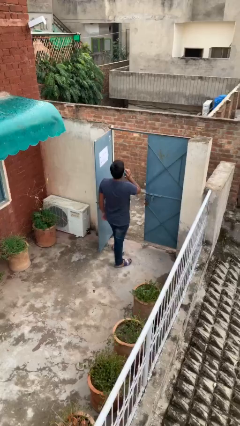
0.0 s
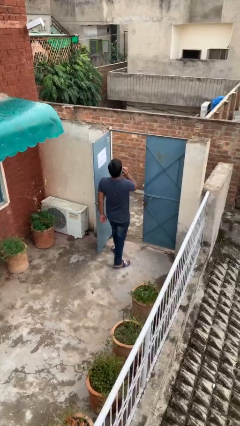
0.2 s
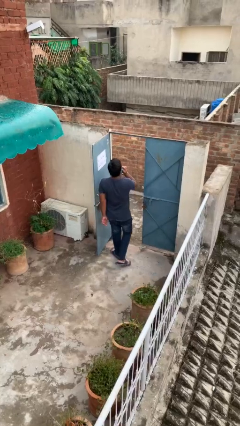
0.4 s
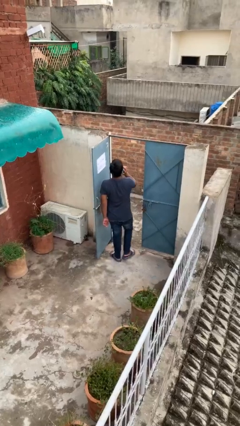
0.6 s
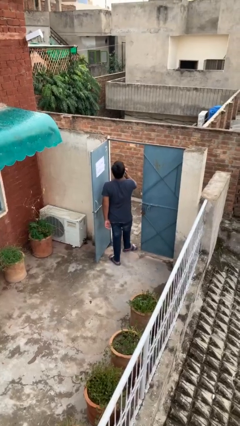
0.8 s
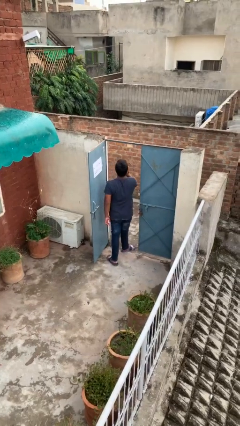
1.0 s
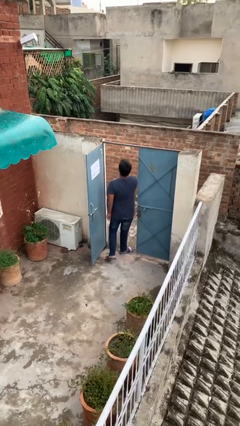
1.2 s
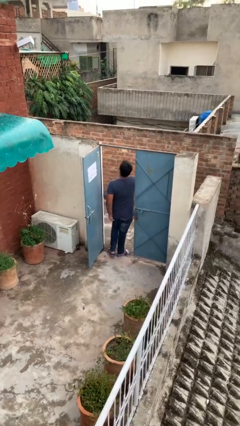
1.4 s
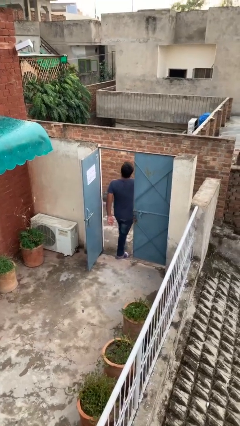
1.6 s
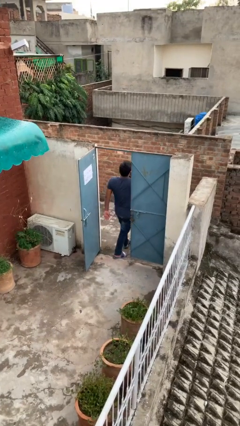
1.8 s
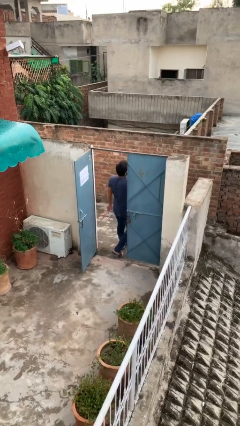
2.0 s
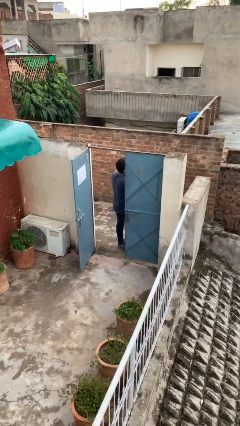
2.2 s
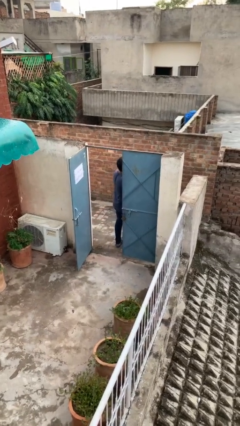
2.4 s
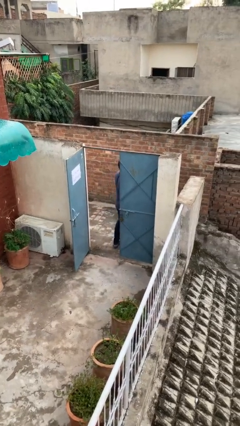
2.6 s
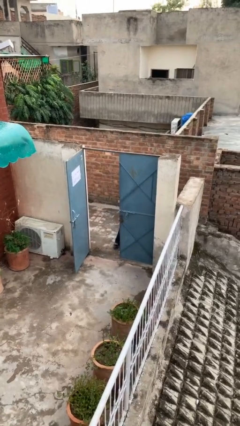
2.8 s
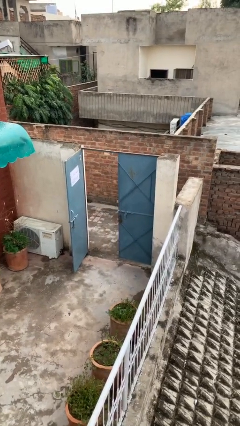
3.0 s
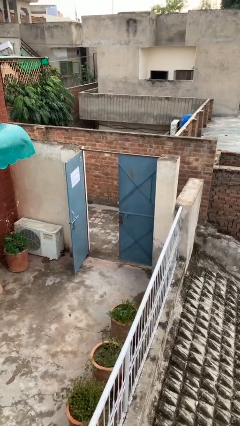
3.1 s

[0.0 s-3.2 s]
person exits scene through structure

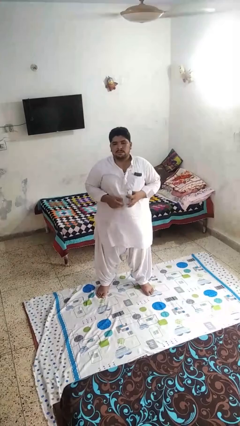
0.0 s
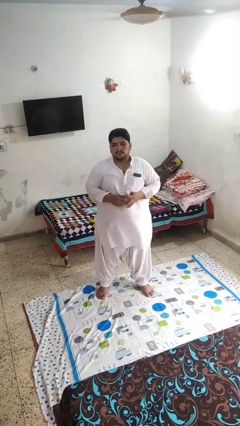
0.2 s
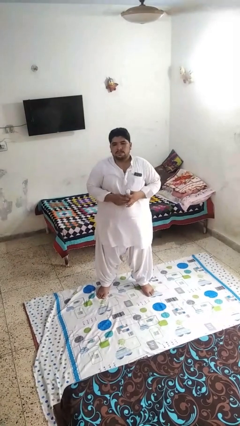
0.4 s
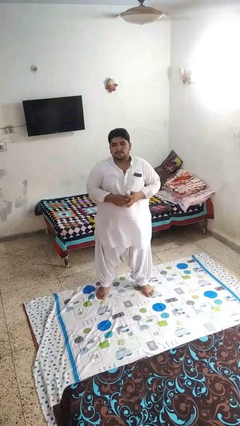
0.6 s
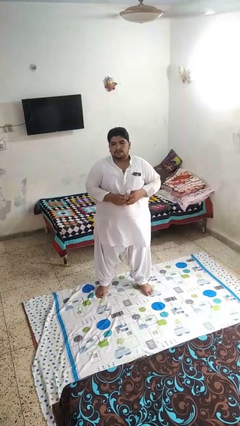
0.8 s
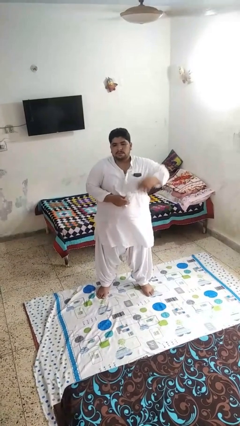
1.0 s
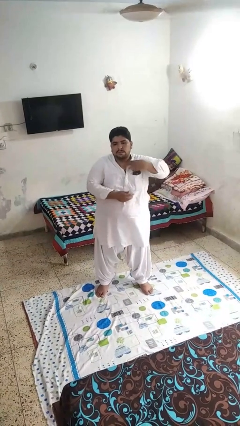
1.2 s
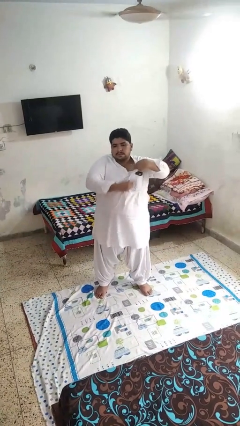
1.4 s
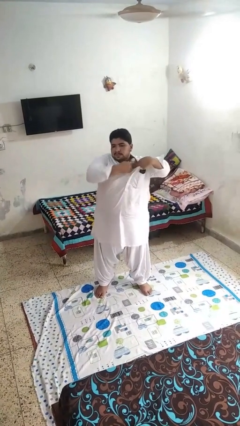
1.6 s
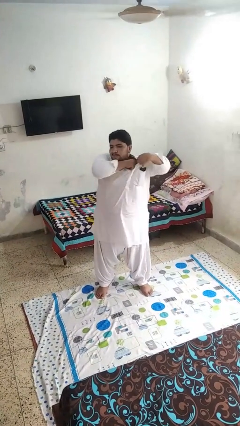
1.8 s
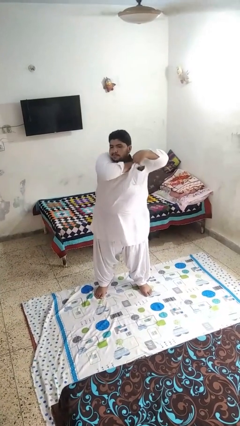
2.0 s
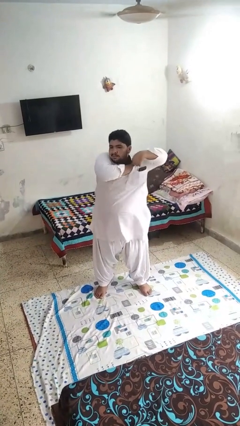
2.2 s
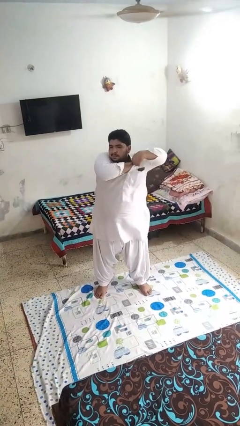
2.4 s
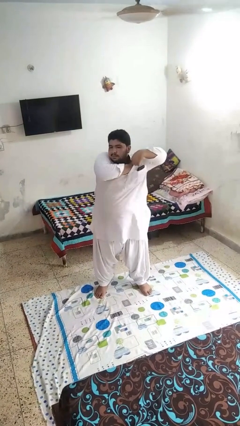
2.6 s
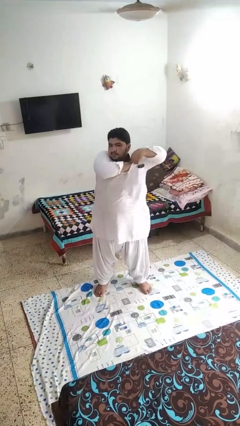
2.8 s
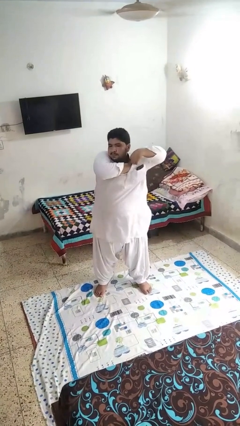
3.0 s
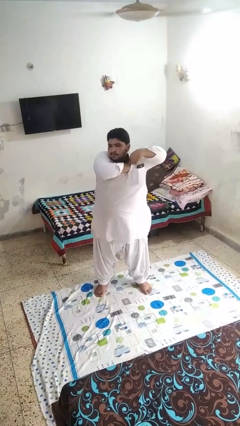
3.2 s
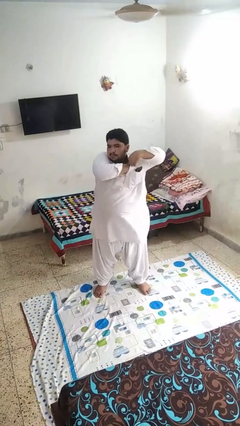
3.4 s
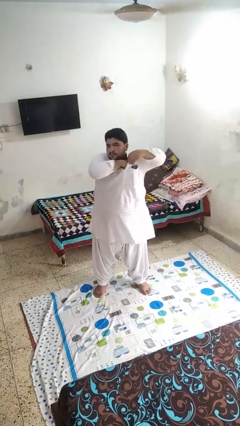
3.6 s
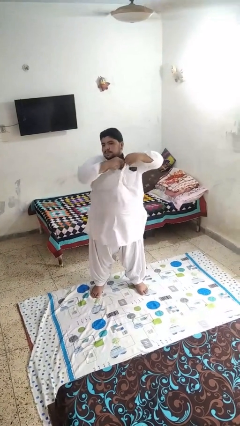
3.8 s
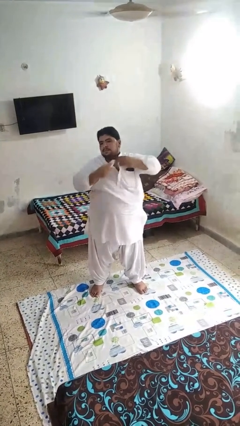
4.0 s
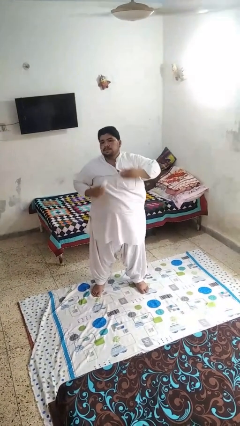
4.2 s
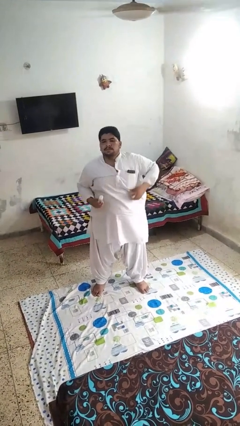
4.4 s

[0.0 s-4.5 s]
person applies deodorant

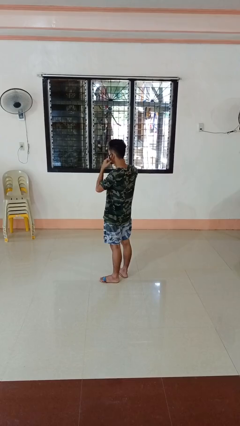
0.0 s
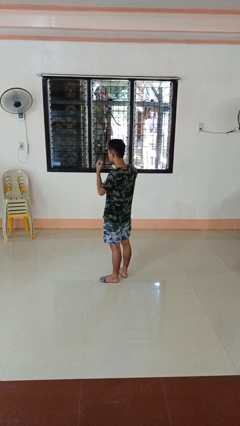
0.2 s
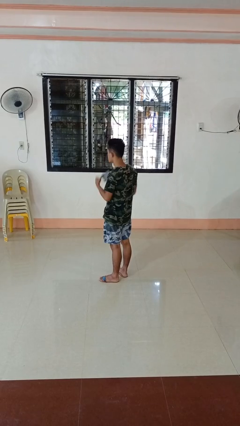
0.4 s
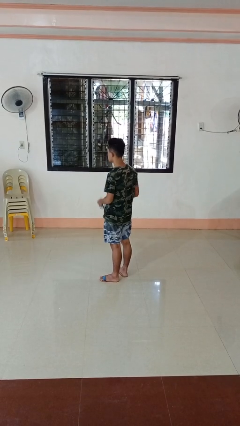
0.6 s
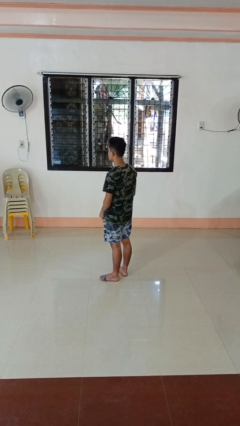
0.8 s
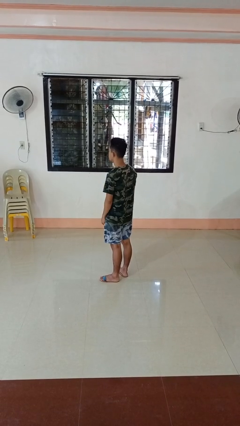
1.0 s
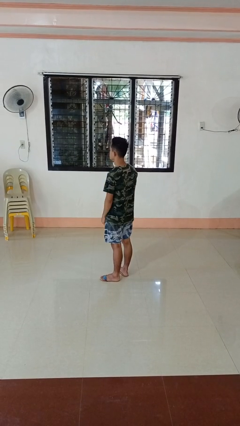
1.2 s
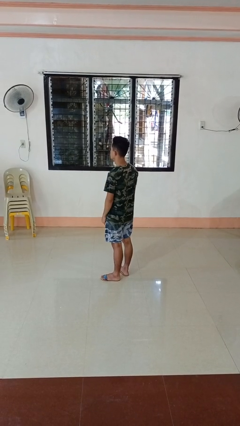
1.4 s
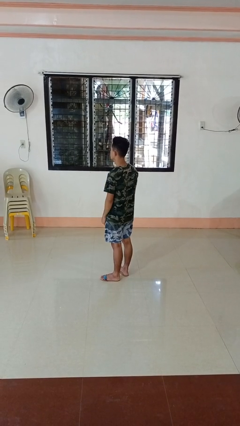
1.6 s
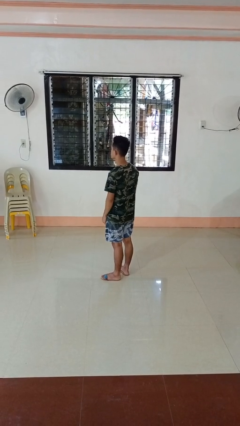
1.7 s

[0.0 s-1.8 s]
person takes off facemask

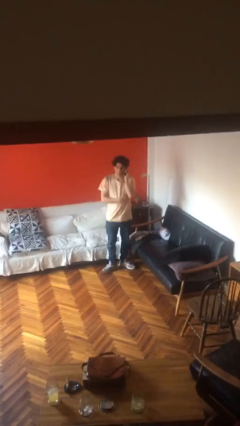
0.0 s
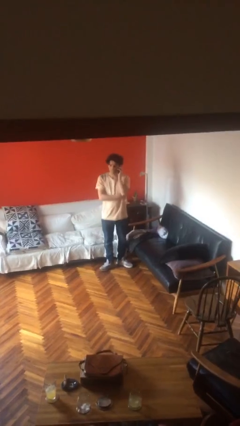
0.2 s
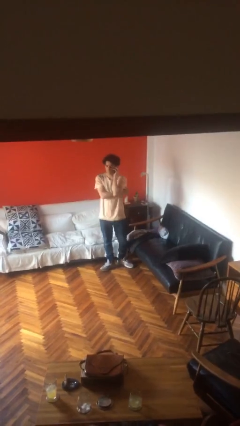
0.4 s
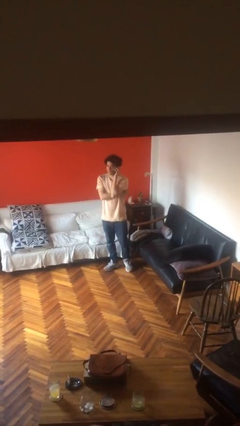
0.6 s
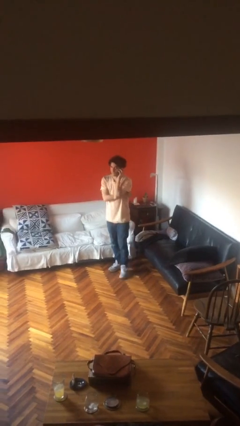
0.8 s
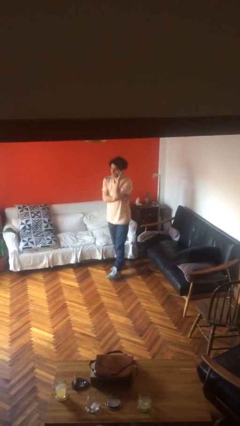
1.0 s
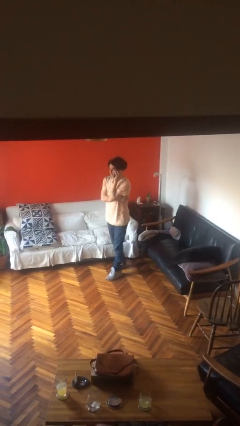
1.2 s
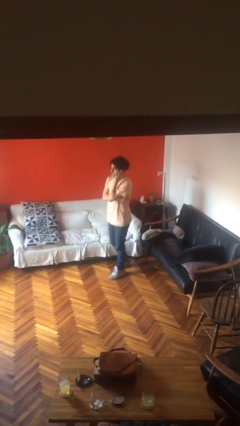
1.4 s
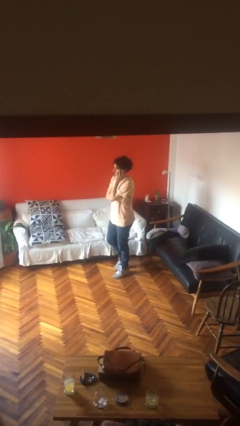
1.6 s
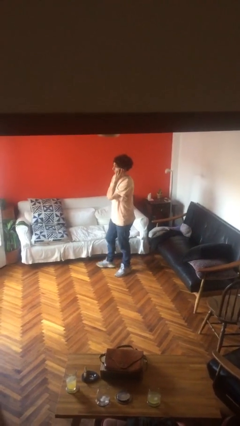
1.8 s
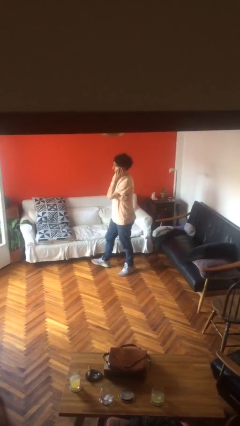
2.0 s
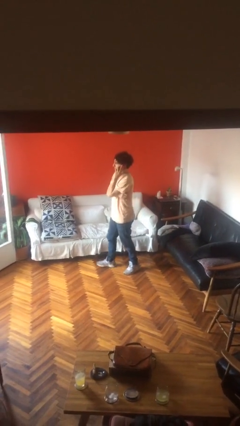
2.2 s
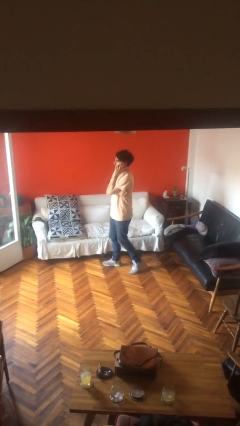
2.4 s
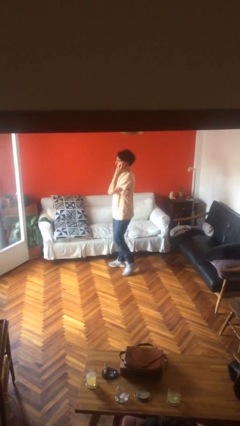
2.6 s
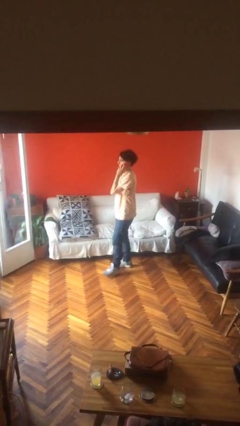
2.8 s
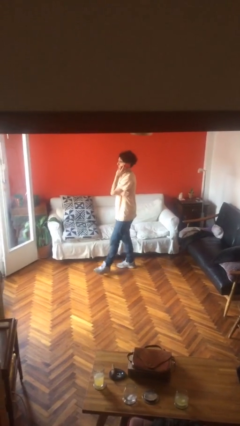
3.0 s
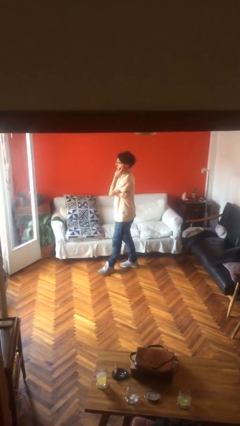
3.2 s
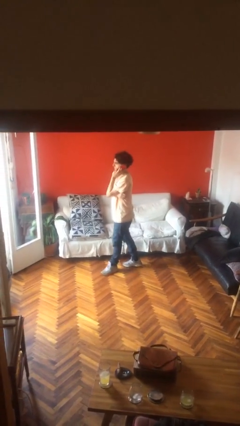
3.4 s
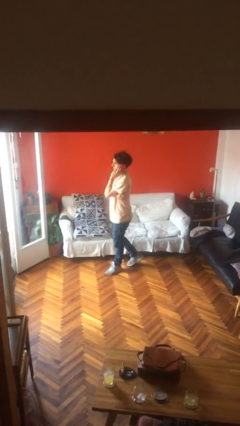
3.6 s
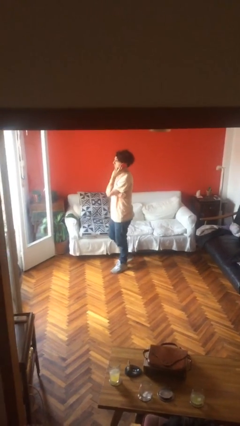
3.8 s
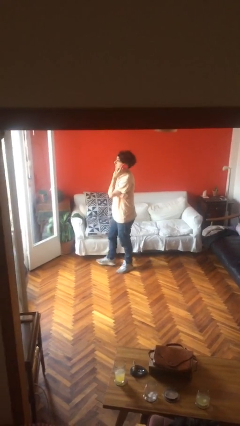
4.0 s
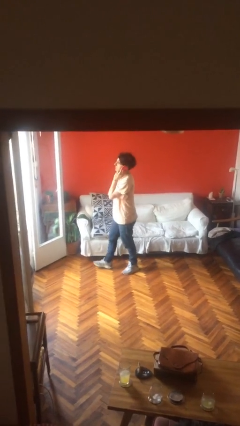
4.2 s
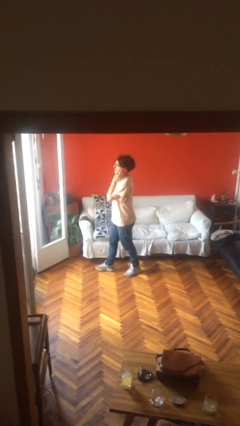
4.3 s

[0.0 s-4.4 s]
person talks on phone

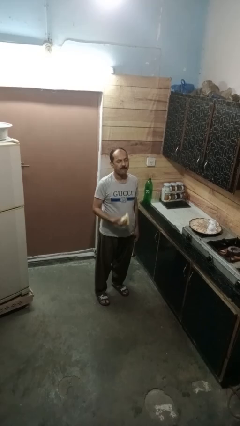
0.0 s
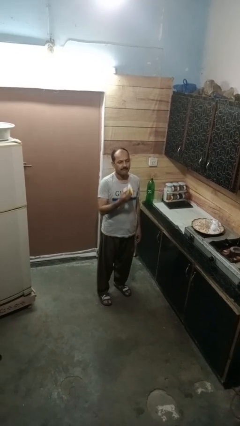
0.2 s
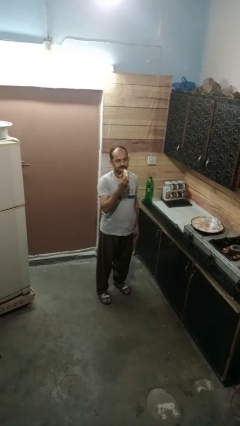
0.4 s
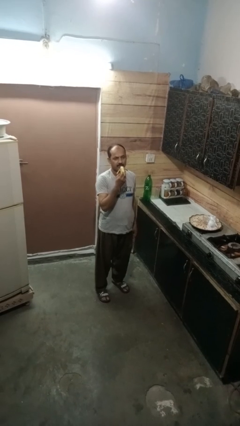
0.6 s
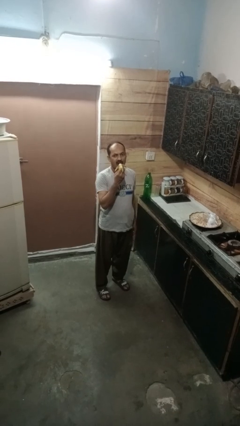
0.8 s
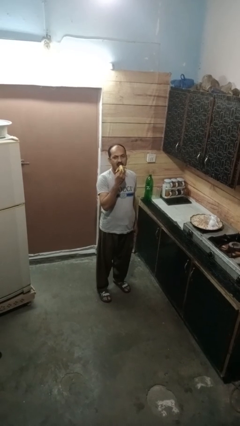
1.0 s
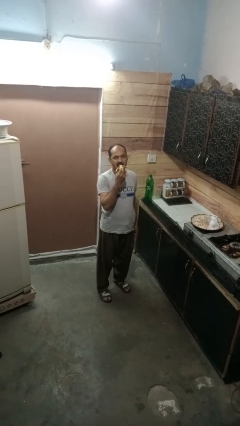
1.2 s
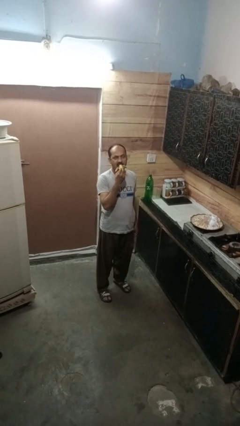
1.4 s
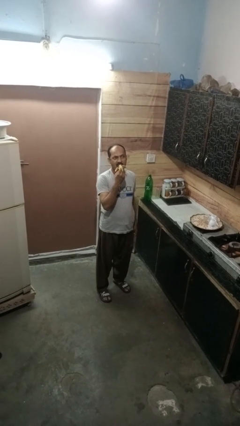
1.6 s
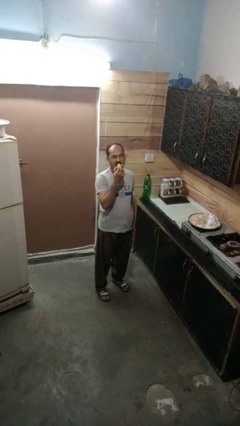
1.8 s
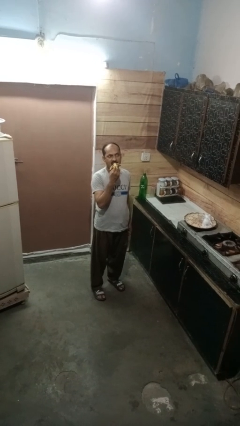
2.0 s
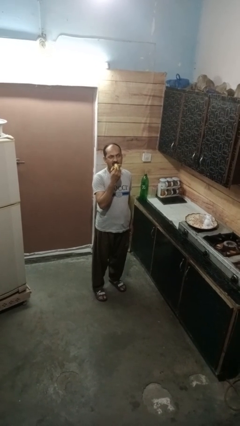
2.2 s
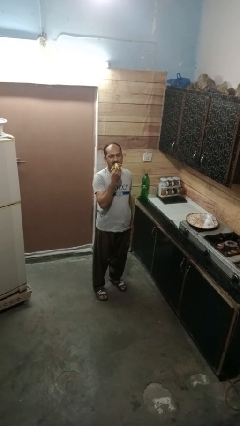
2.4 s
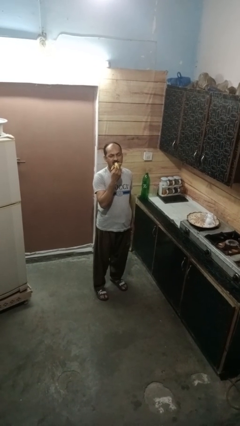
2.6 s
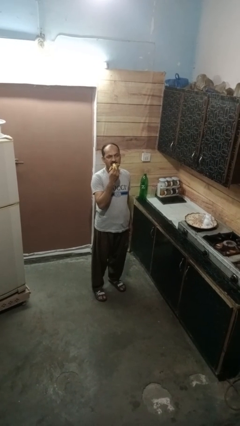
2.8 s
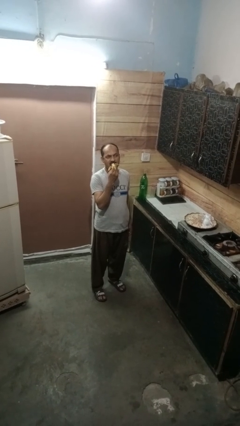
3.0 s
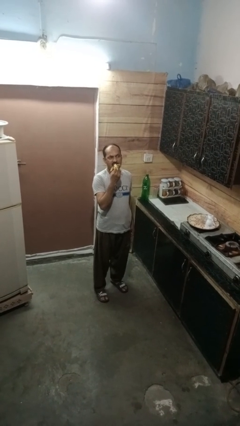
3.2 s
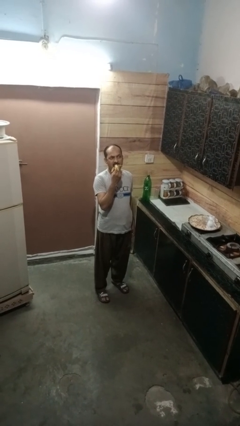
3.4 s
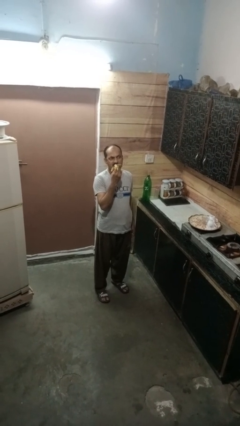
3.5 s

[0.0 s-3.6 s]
person eats banana

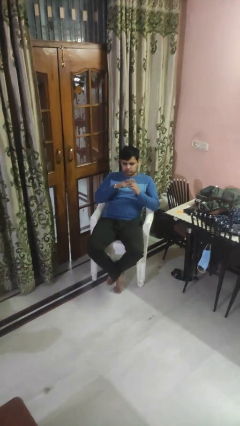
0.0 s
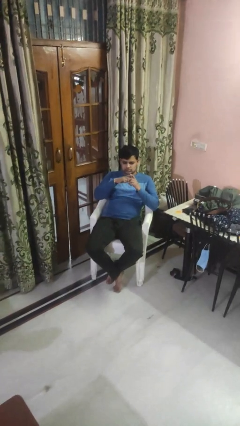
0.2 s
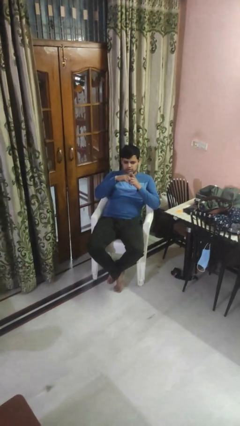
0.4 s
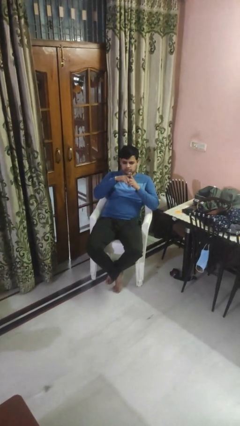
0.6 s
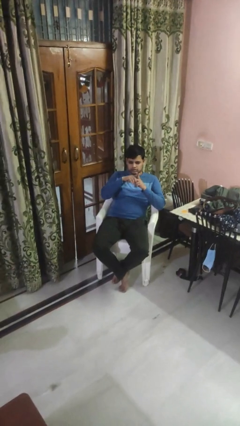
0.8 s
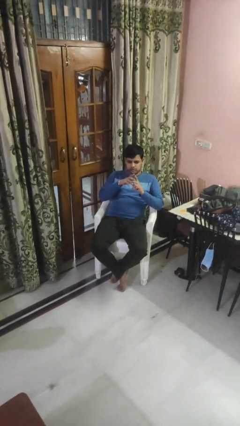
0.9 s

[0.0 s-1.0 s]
person puts on ring
